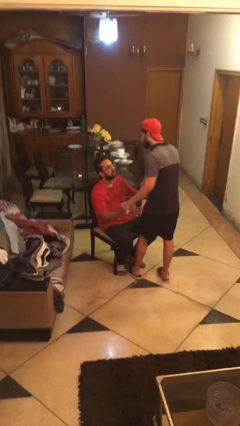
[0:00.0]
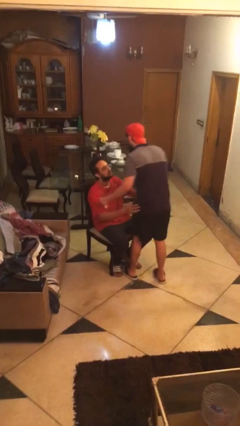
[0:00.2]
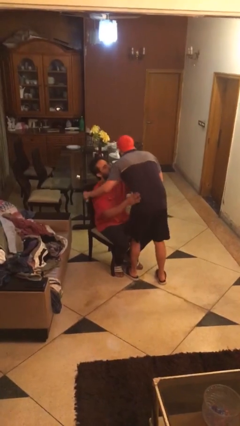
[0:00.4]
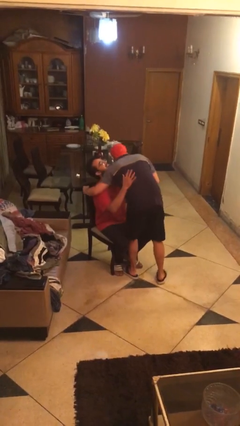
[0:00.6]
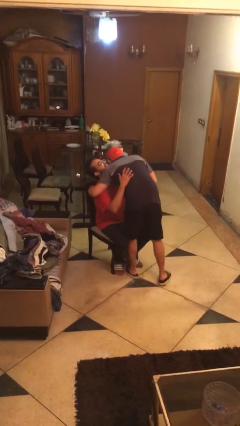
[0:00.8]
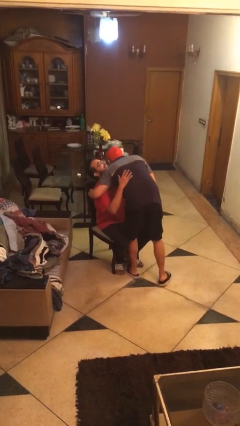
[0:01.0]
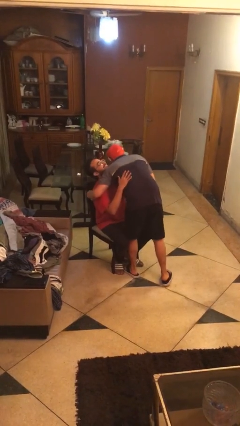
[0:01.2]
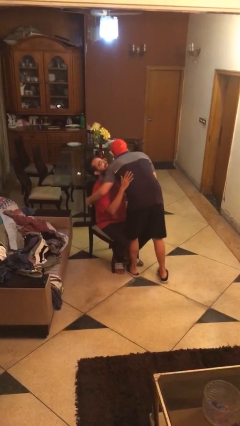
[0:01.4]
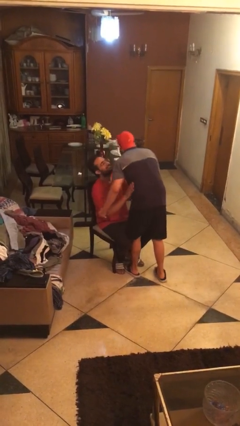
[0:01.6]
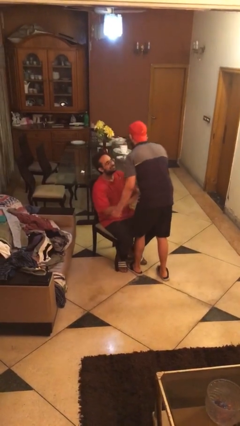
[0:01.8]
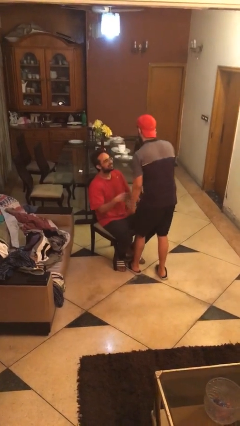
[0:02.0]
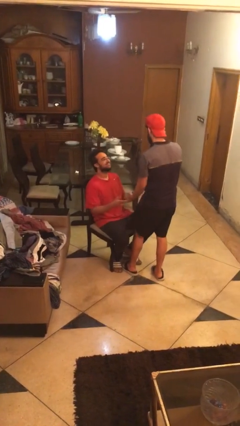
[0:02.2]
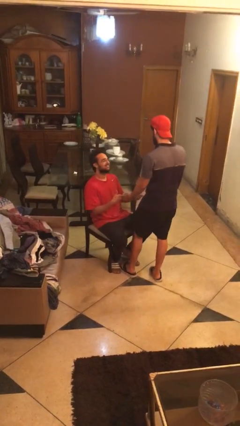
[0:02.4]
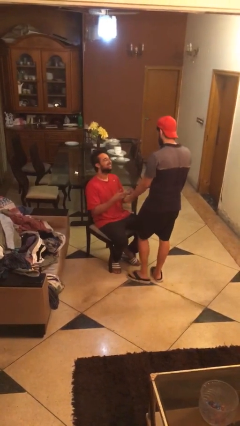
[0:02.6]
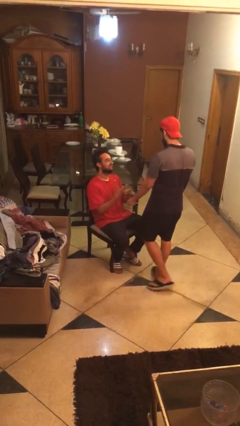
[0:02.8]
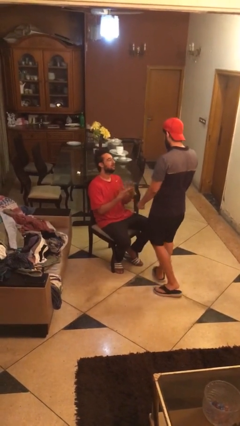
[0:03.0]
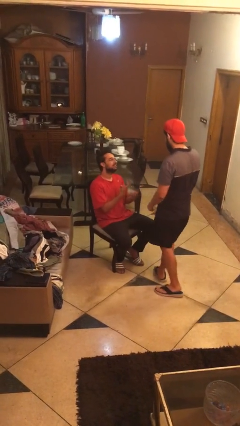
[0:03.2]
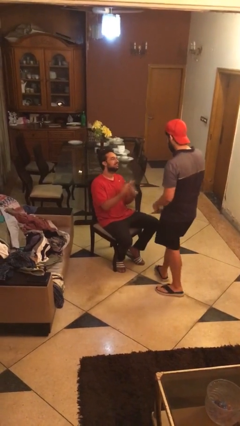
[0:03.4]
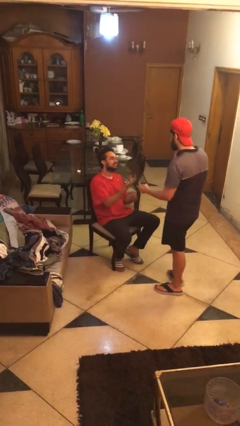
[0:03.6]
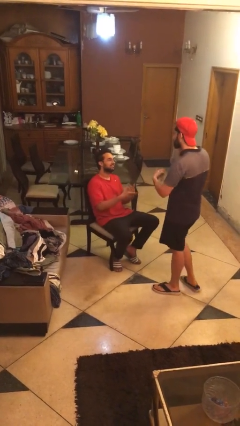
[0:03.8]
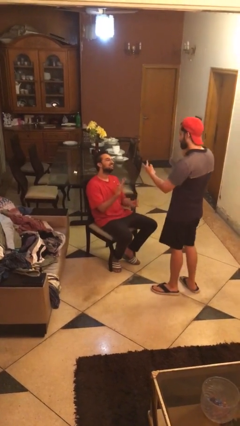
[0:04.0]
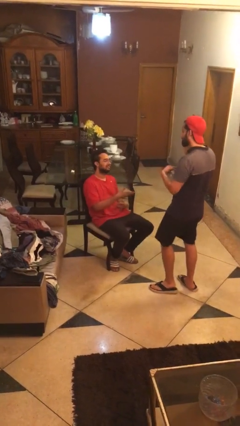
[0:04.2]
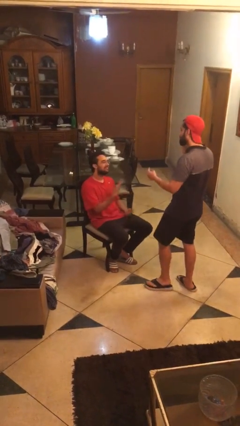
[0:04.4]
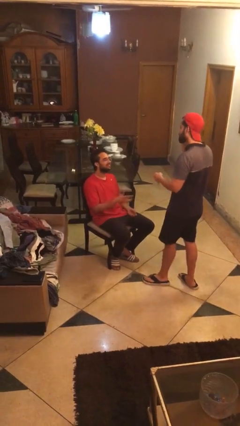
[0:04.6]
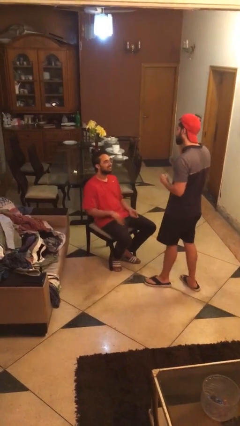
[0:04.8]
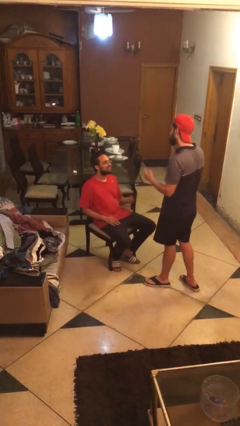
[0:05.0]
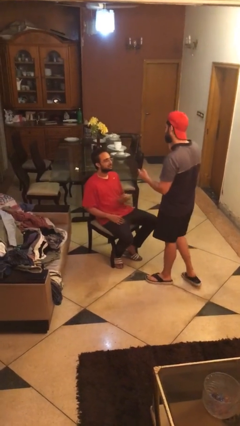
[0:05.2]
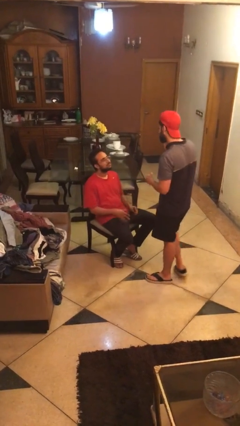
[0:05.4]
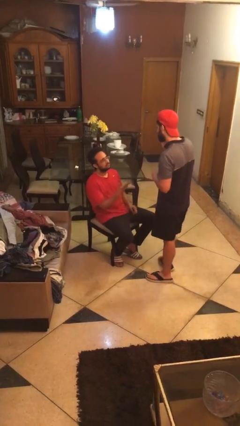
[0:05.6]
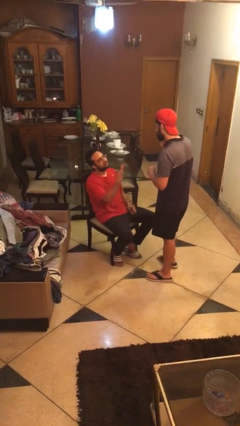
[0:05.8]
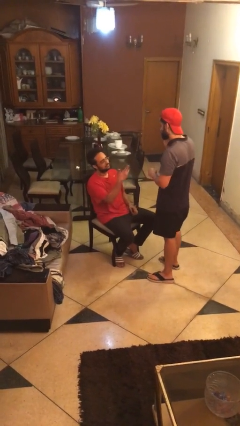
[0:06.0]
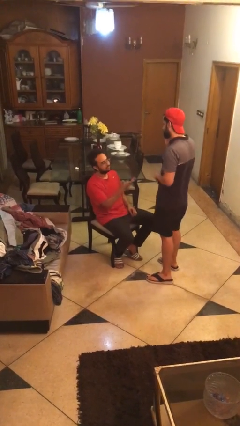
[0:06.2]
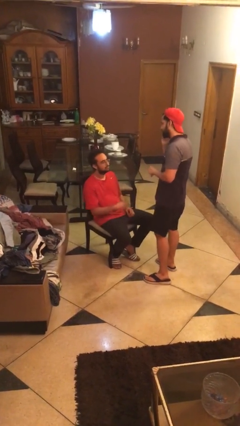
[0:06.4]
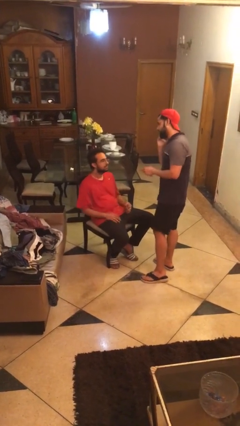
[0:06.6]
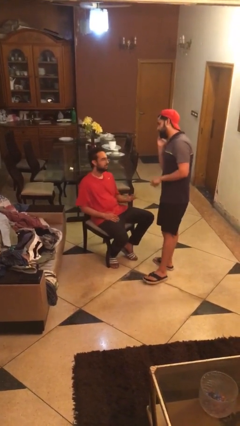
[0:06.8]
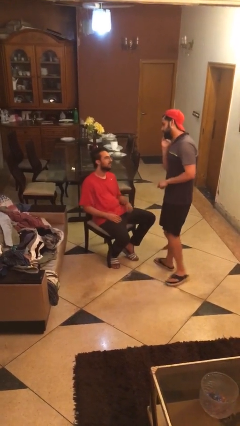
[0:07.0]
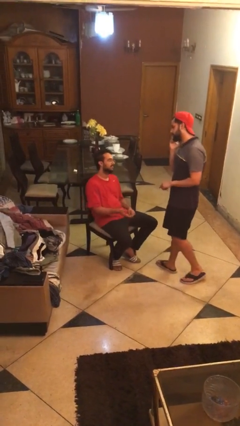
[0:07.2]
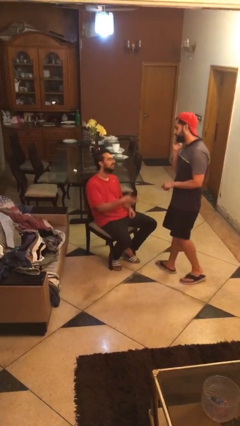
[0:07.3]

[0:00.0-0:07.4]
person embraces person

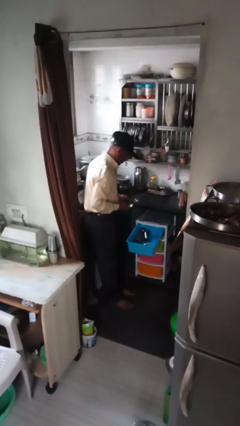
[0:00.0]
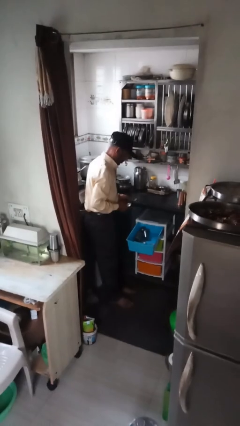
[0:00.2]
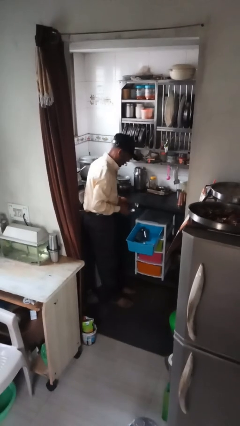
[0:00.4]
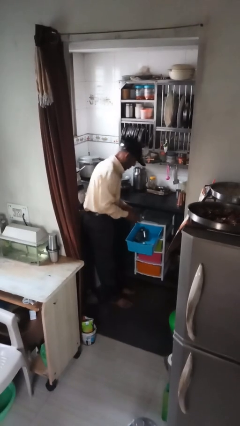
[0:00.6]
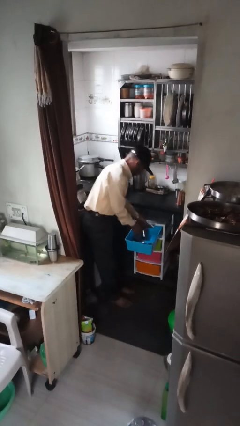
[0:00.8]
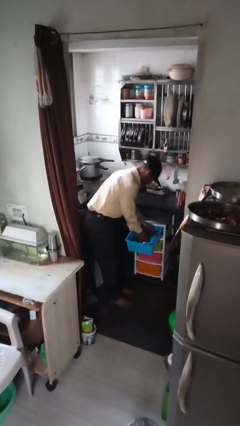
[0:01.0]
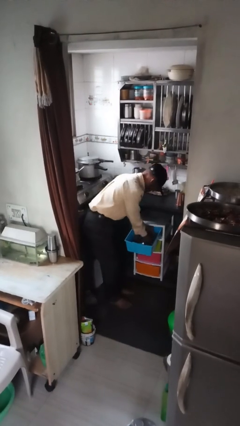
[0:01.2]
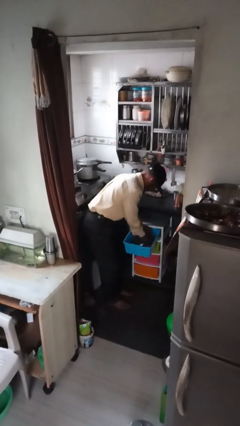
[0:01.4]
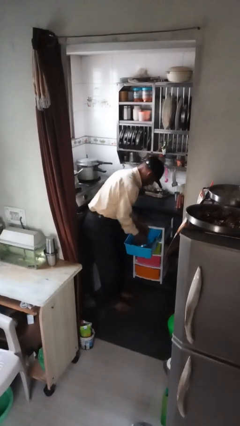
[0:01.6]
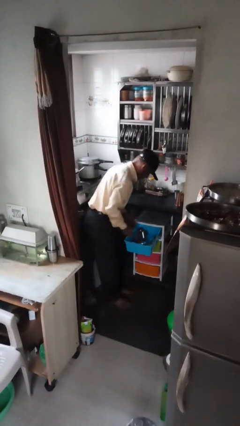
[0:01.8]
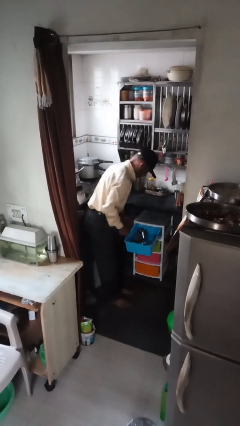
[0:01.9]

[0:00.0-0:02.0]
person puts object into kitchen drawer

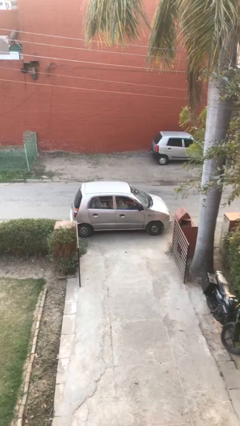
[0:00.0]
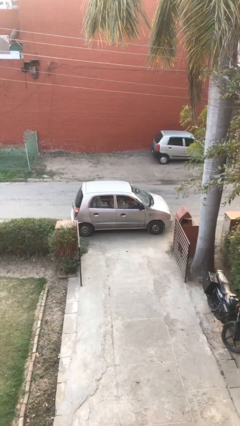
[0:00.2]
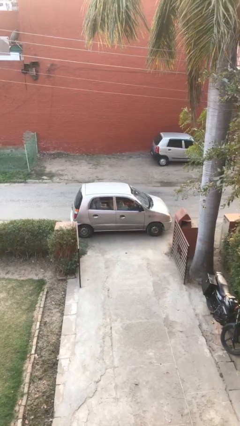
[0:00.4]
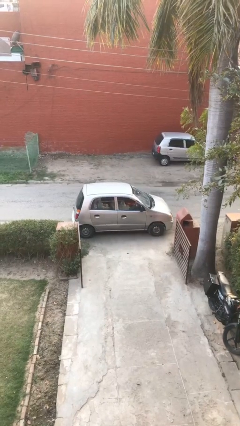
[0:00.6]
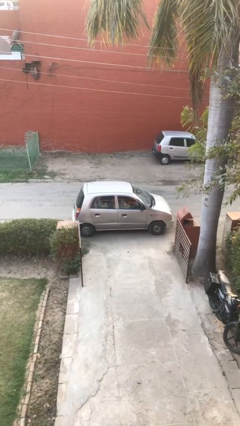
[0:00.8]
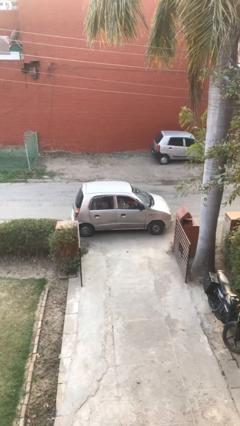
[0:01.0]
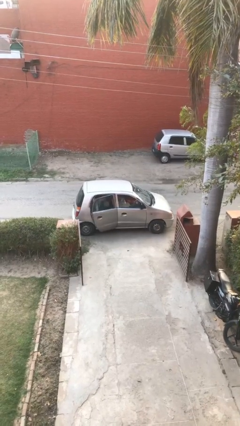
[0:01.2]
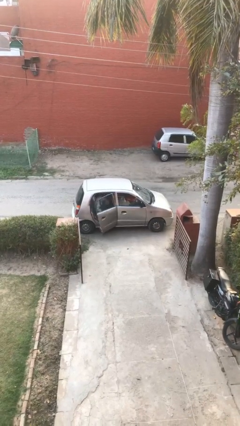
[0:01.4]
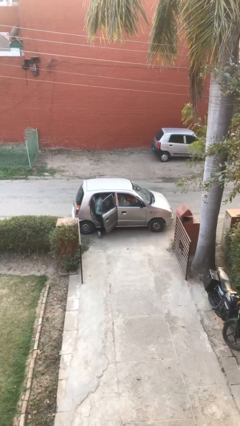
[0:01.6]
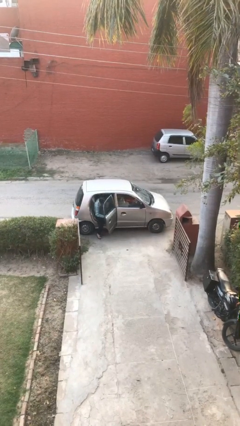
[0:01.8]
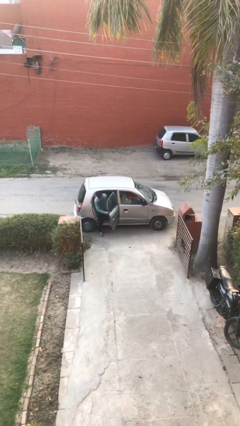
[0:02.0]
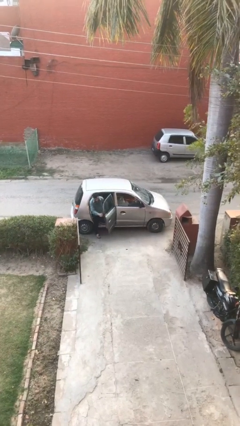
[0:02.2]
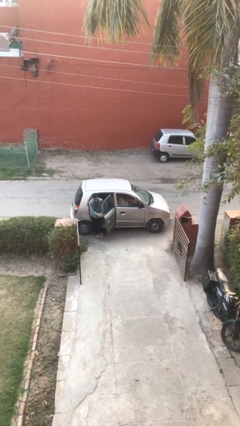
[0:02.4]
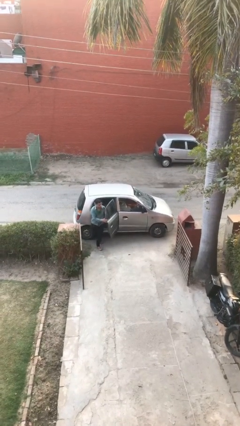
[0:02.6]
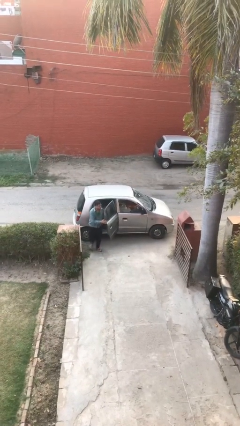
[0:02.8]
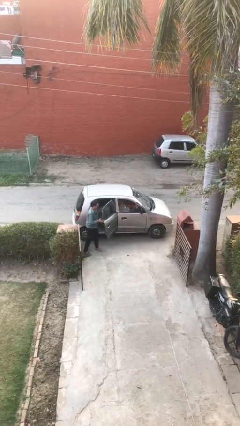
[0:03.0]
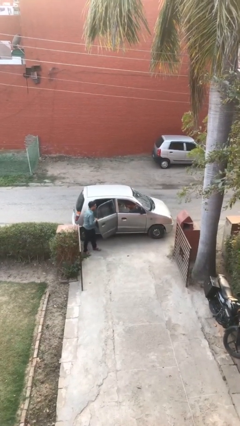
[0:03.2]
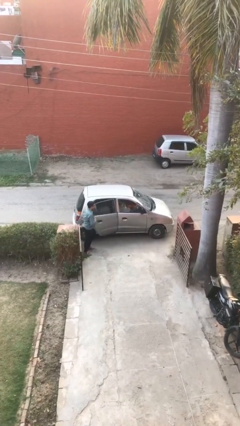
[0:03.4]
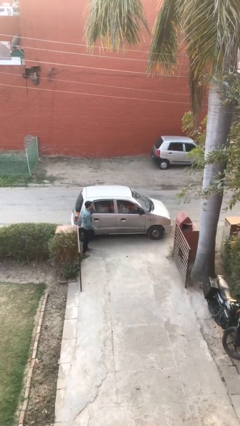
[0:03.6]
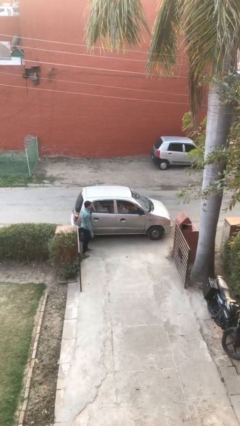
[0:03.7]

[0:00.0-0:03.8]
car drops off person

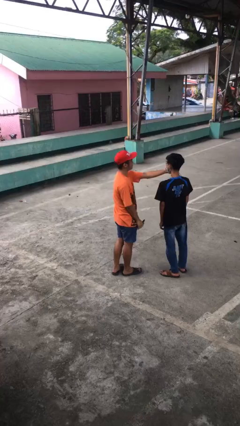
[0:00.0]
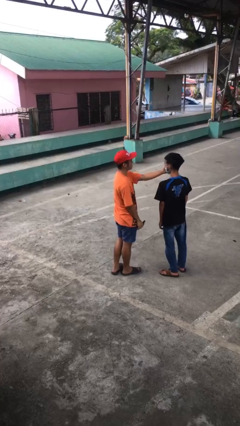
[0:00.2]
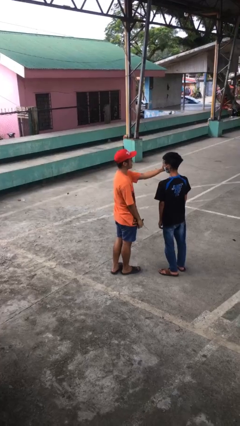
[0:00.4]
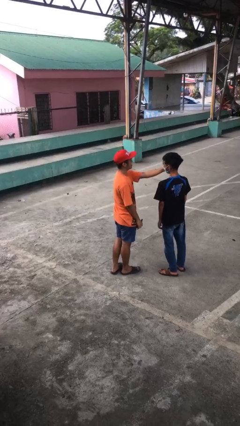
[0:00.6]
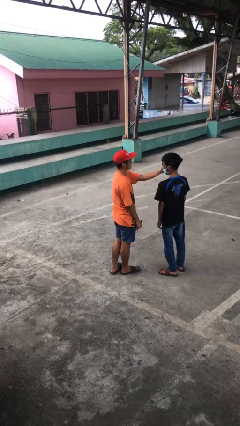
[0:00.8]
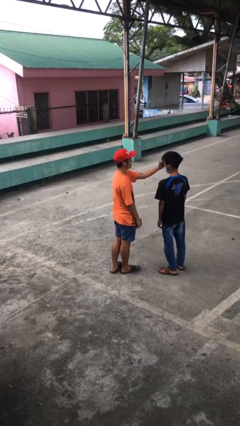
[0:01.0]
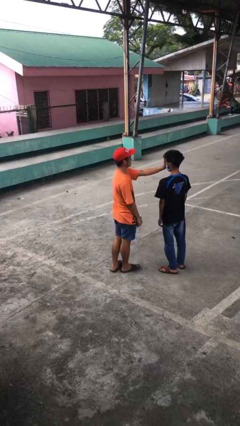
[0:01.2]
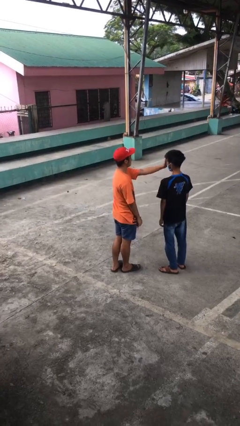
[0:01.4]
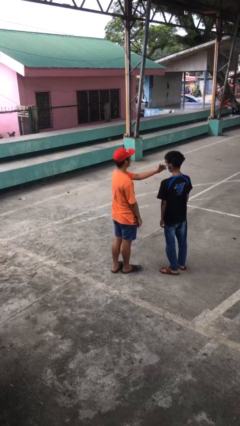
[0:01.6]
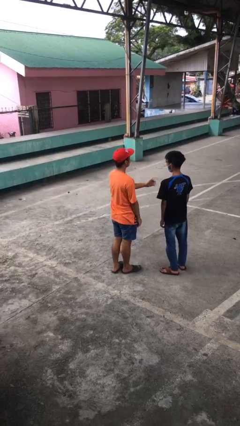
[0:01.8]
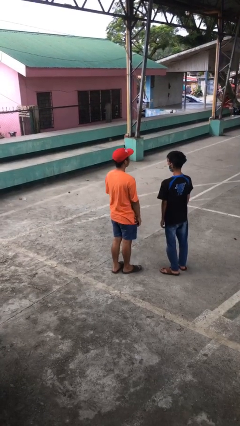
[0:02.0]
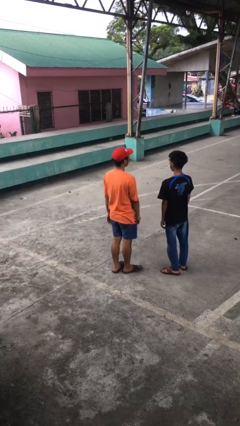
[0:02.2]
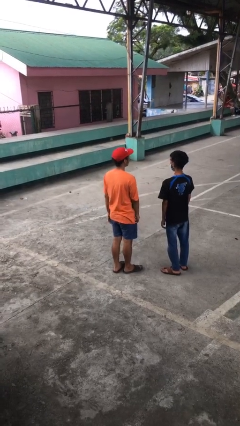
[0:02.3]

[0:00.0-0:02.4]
person touches face of person

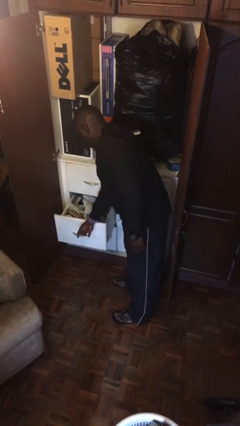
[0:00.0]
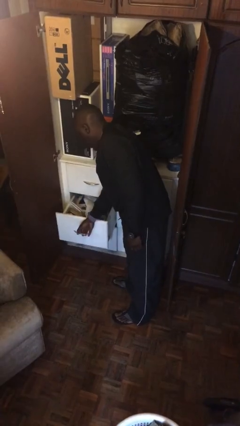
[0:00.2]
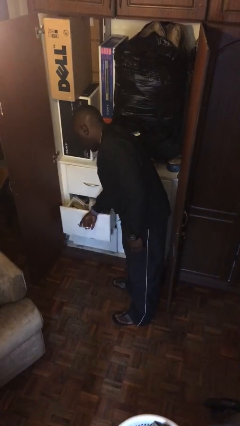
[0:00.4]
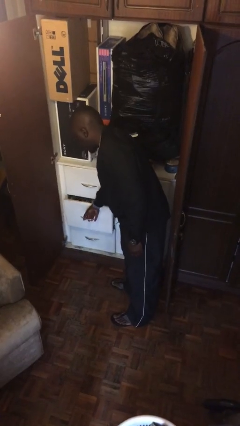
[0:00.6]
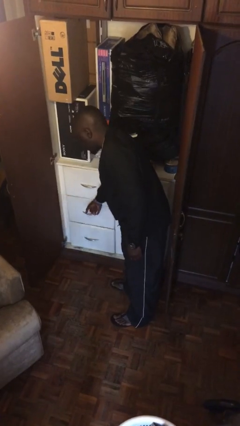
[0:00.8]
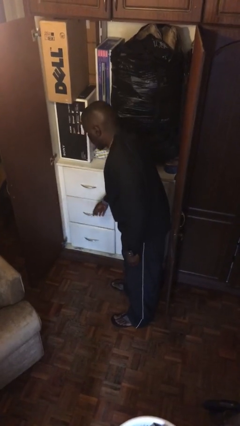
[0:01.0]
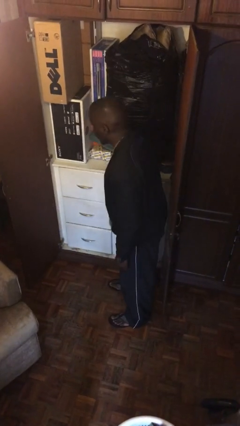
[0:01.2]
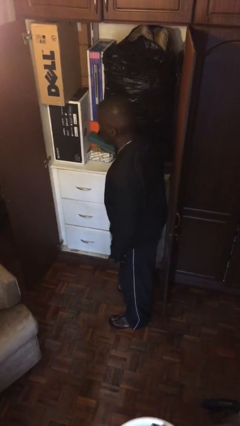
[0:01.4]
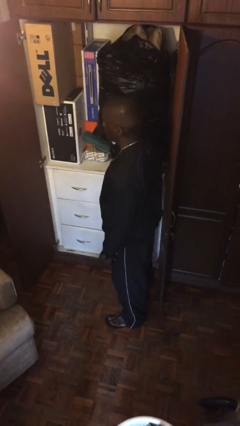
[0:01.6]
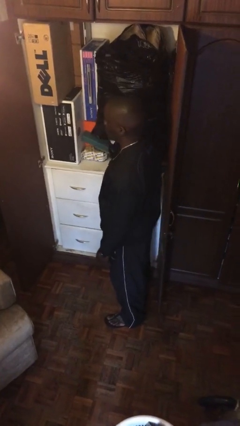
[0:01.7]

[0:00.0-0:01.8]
person closes dresser drawer

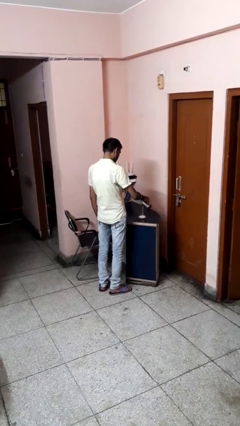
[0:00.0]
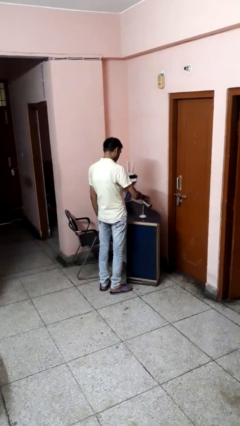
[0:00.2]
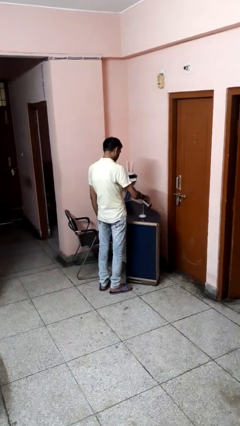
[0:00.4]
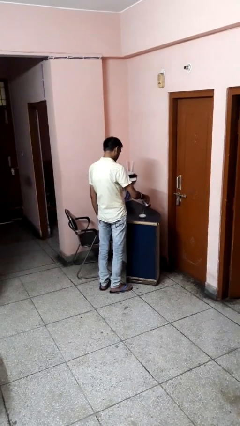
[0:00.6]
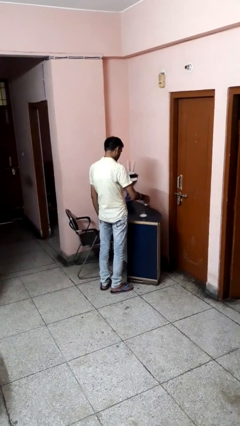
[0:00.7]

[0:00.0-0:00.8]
person pours into bowl
